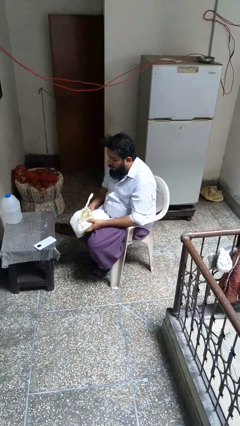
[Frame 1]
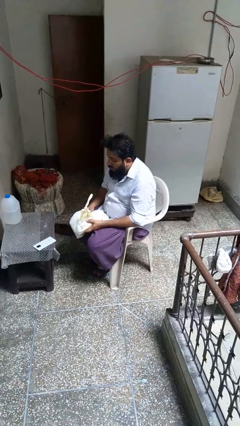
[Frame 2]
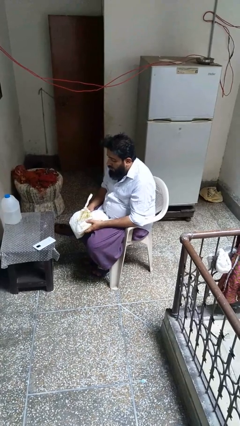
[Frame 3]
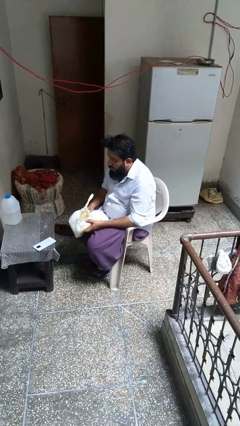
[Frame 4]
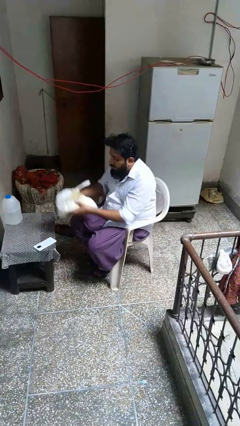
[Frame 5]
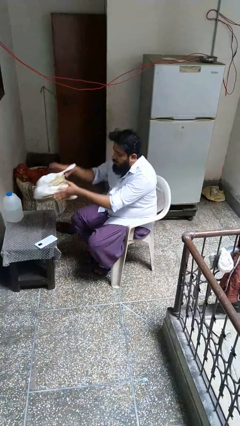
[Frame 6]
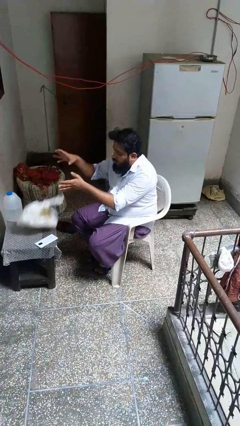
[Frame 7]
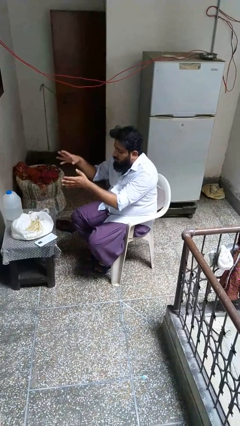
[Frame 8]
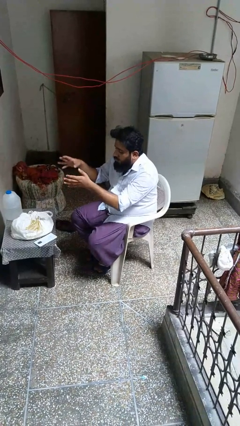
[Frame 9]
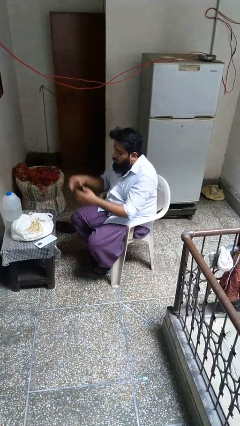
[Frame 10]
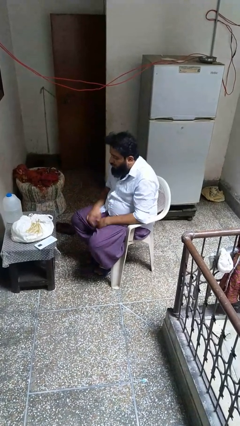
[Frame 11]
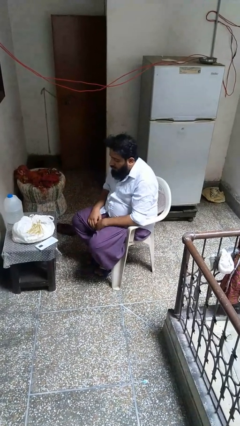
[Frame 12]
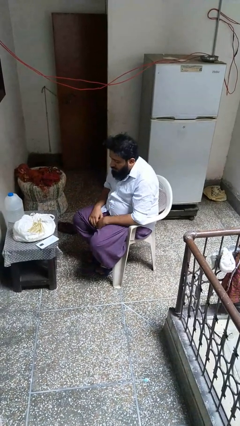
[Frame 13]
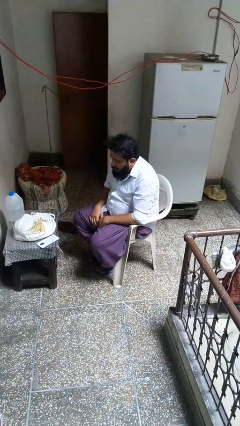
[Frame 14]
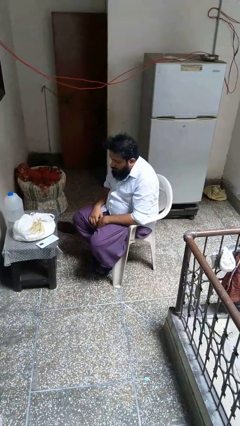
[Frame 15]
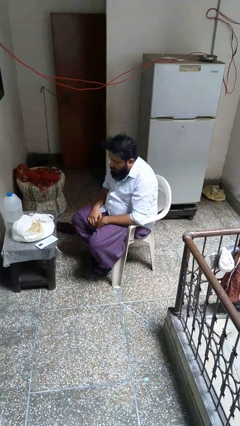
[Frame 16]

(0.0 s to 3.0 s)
person throws object on table

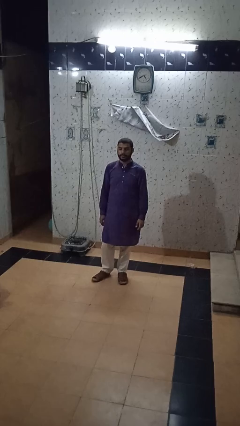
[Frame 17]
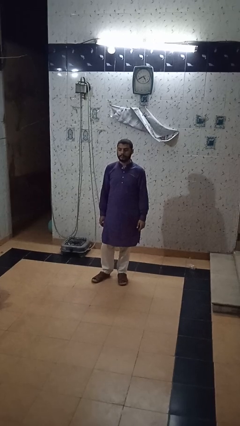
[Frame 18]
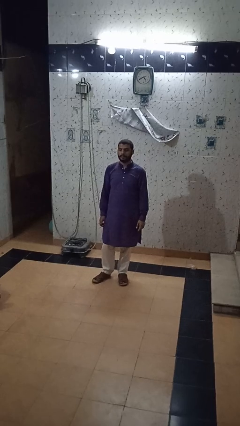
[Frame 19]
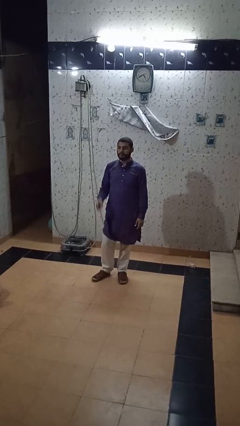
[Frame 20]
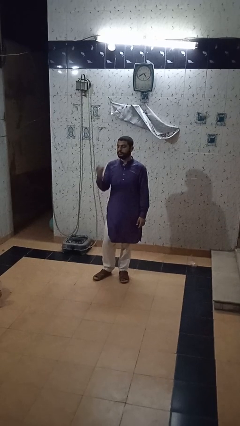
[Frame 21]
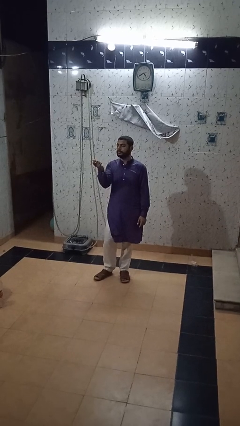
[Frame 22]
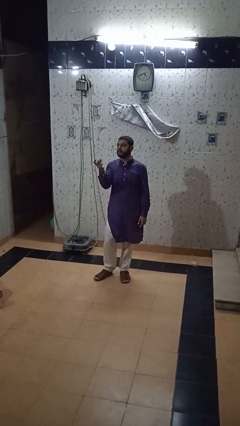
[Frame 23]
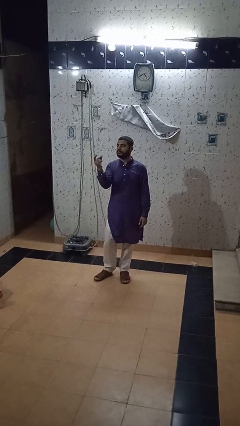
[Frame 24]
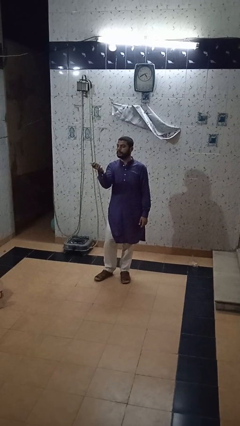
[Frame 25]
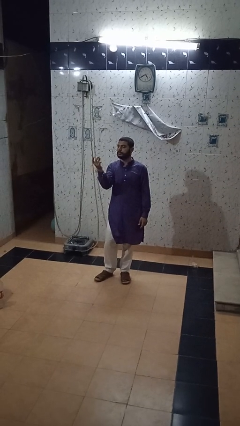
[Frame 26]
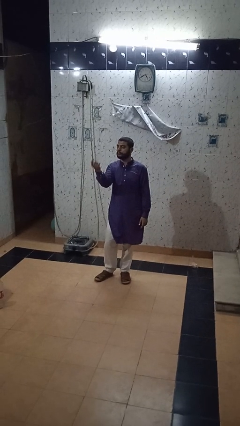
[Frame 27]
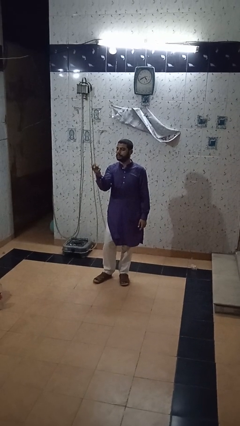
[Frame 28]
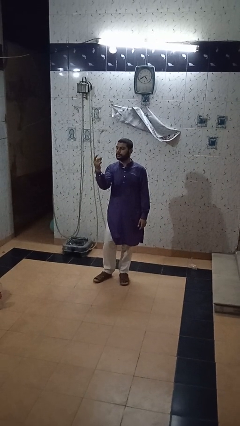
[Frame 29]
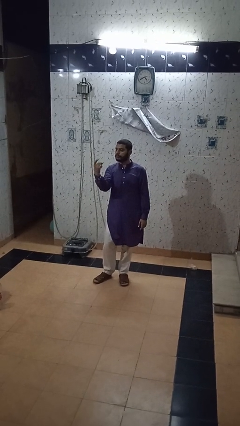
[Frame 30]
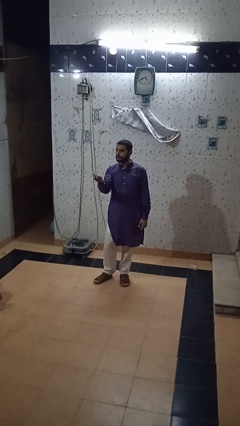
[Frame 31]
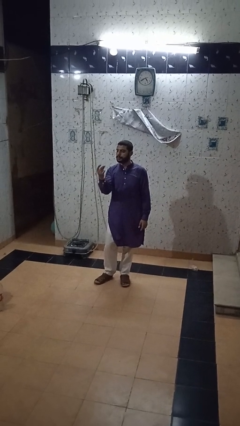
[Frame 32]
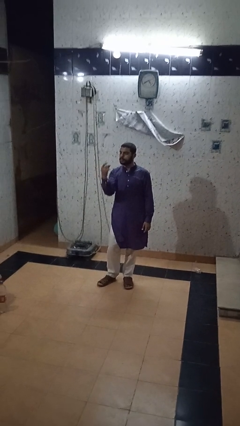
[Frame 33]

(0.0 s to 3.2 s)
person snaps fingers

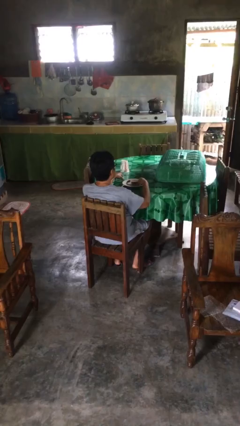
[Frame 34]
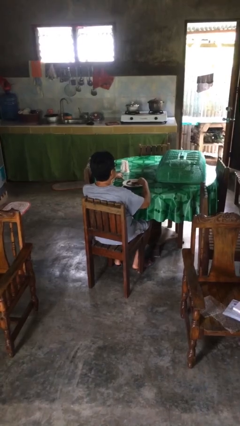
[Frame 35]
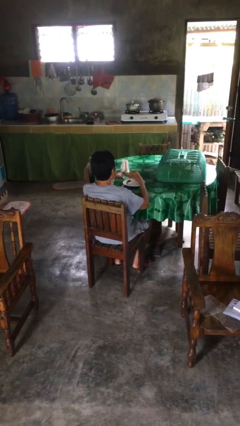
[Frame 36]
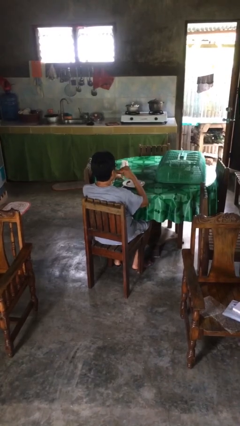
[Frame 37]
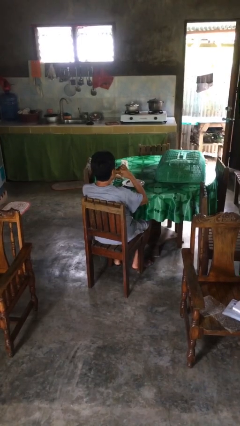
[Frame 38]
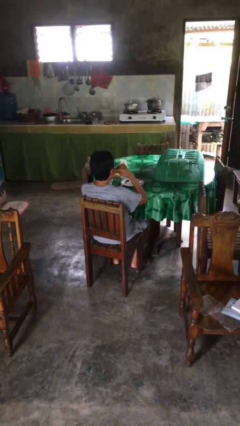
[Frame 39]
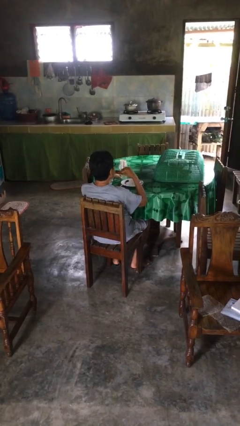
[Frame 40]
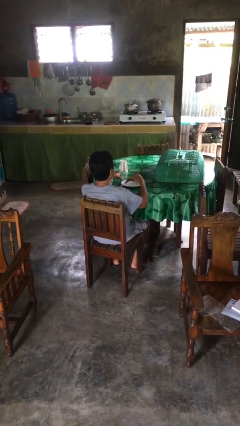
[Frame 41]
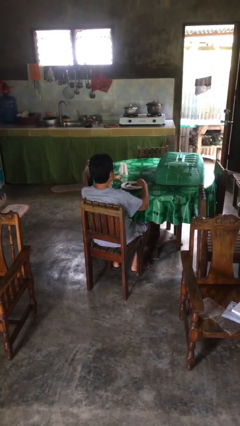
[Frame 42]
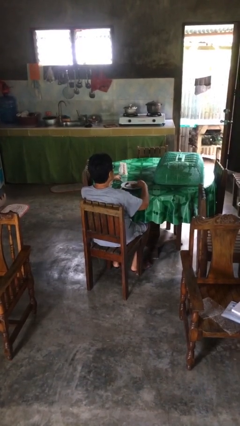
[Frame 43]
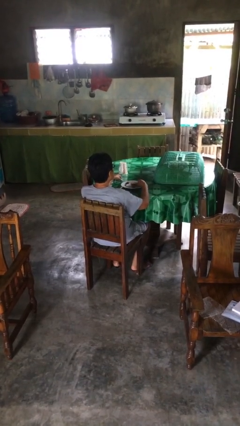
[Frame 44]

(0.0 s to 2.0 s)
person eats with hands

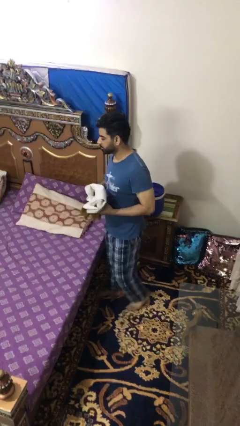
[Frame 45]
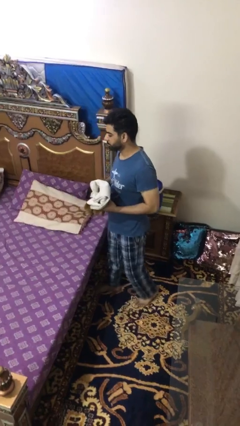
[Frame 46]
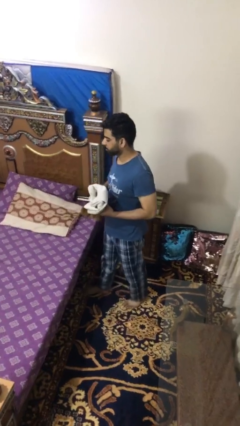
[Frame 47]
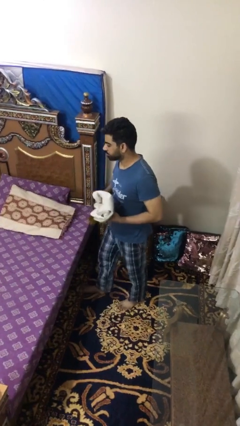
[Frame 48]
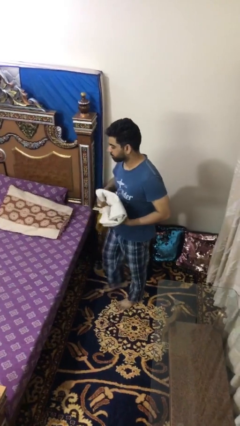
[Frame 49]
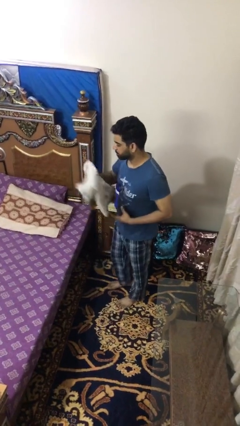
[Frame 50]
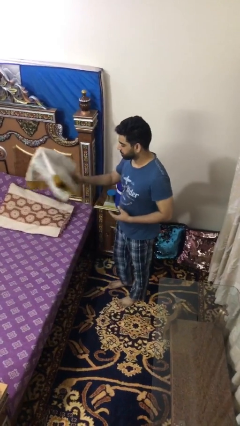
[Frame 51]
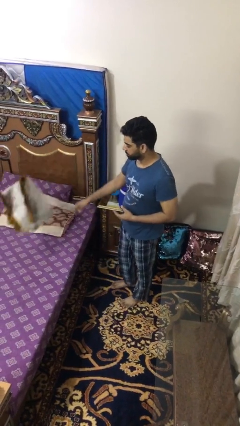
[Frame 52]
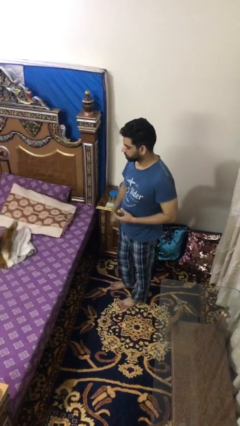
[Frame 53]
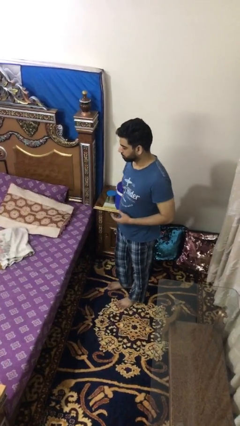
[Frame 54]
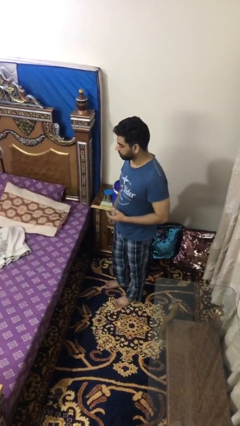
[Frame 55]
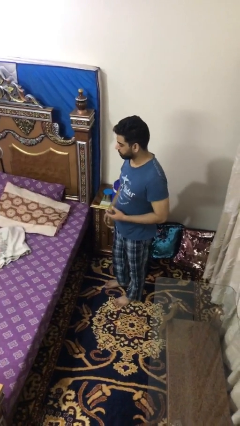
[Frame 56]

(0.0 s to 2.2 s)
person throws object on bed

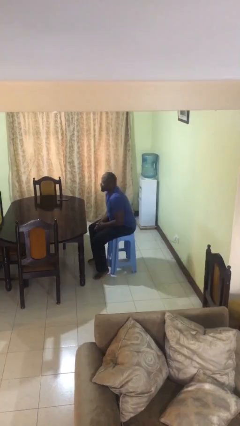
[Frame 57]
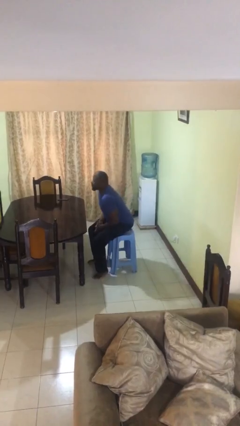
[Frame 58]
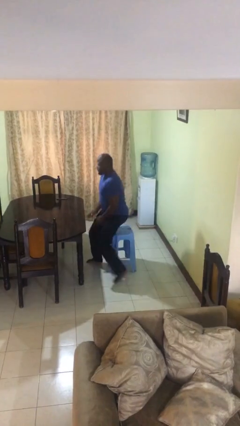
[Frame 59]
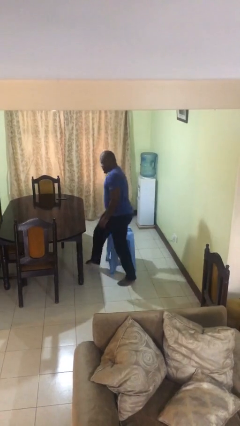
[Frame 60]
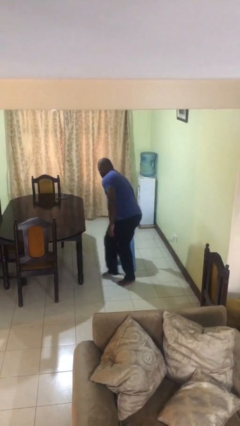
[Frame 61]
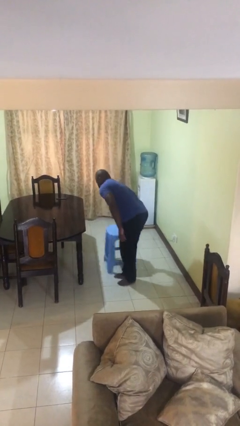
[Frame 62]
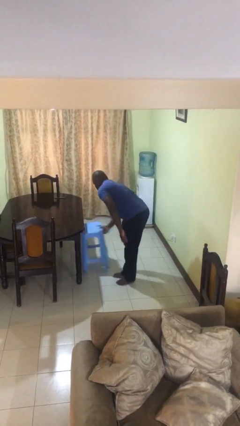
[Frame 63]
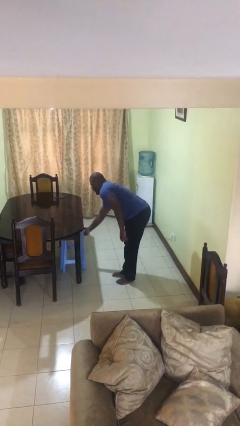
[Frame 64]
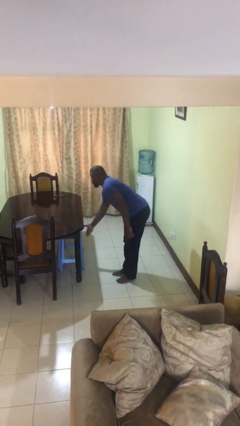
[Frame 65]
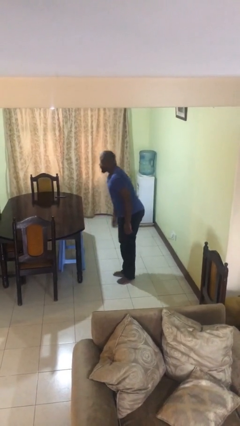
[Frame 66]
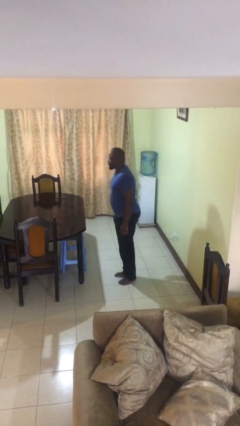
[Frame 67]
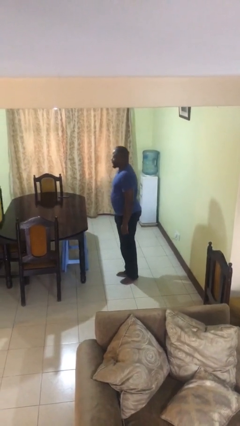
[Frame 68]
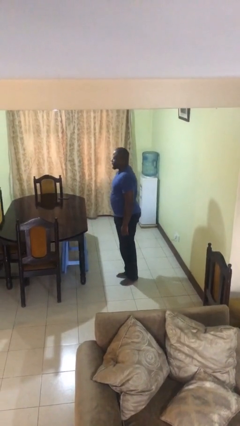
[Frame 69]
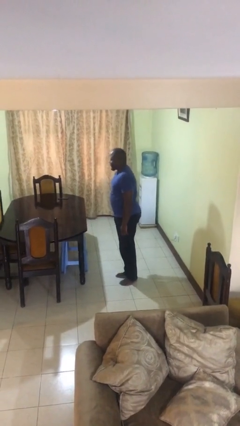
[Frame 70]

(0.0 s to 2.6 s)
person stands up

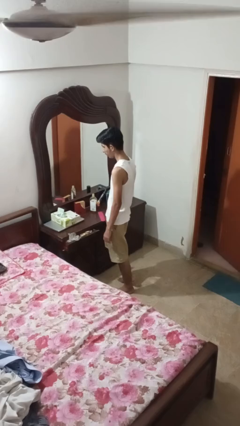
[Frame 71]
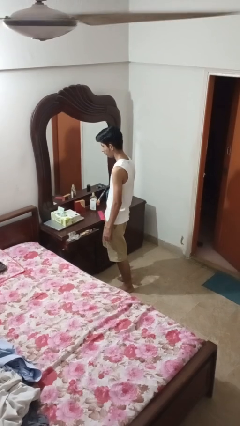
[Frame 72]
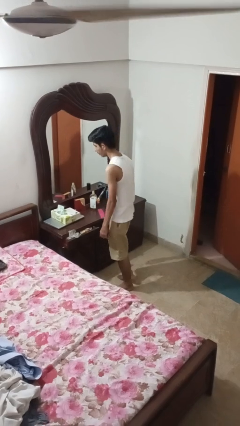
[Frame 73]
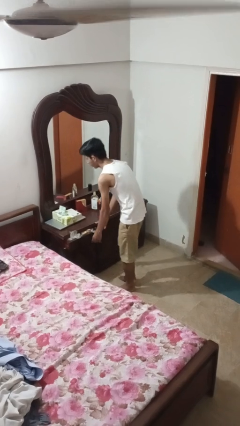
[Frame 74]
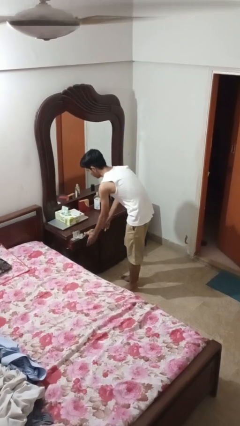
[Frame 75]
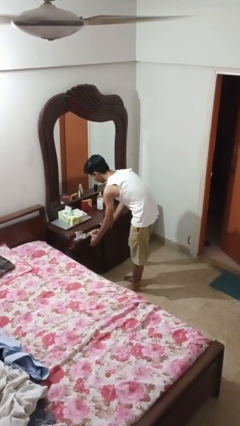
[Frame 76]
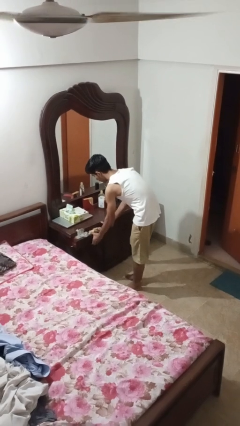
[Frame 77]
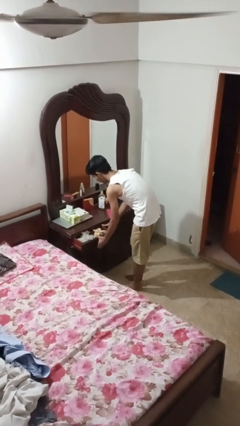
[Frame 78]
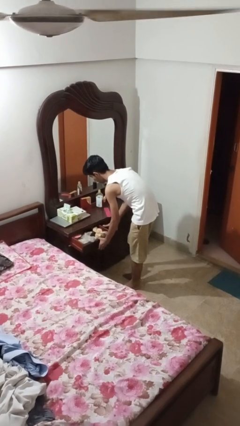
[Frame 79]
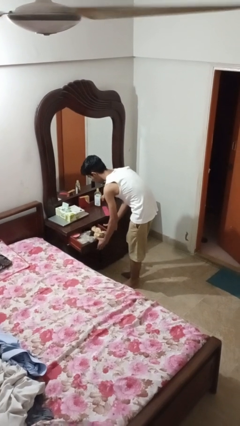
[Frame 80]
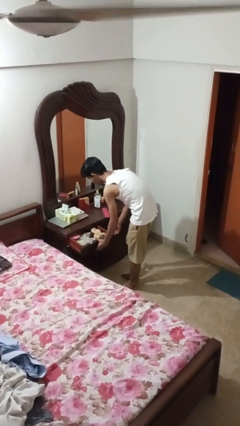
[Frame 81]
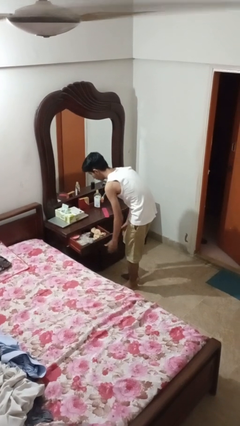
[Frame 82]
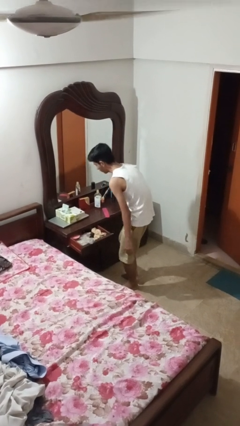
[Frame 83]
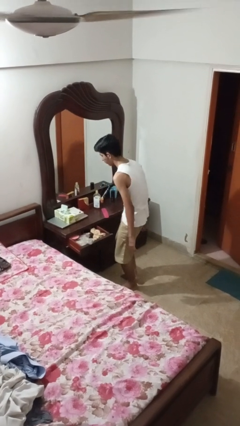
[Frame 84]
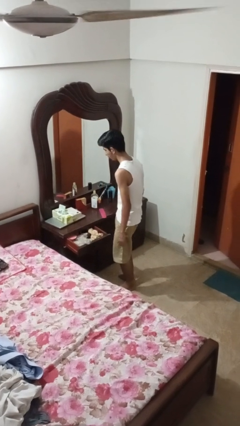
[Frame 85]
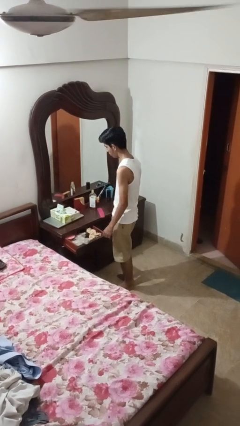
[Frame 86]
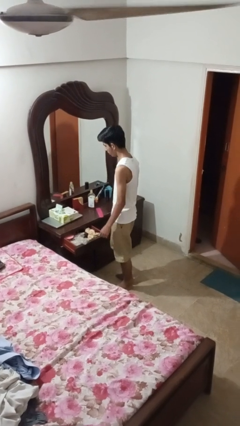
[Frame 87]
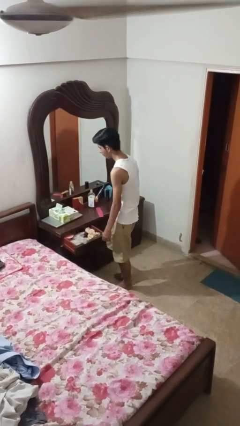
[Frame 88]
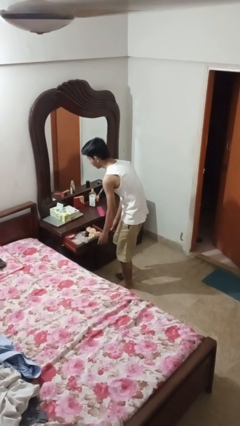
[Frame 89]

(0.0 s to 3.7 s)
person opens dresser drawer

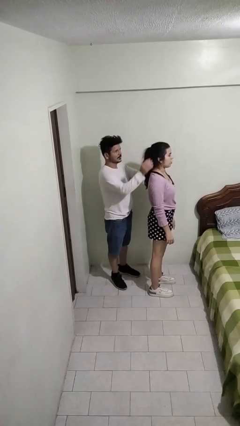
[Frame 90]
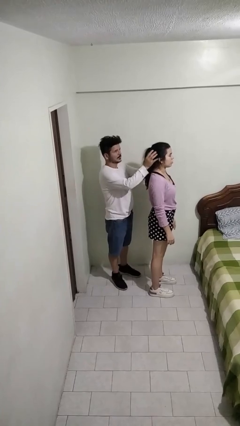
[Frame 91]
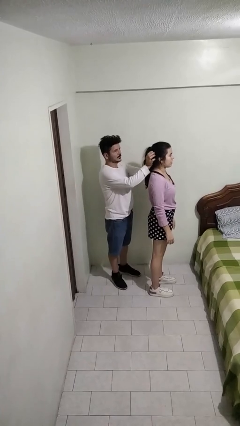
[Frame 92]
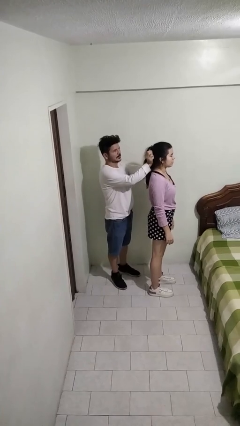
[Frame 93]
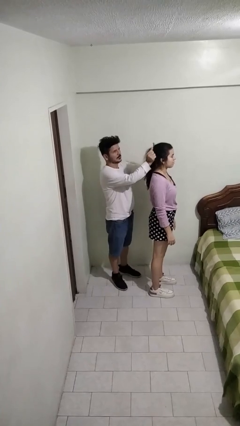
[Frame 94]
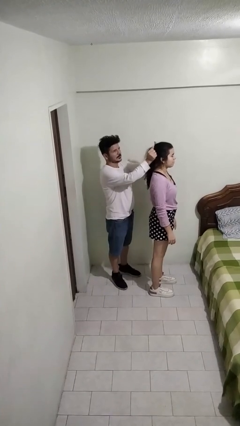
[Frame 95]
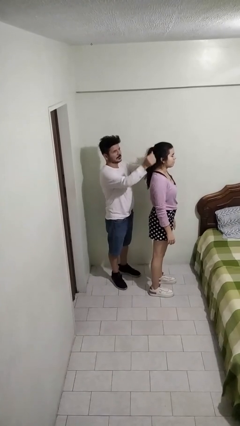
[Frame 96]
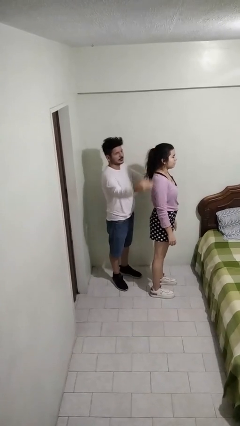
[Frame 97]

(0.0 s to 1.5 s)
person grabs person by hair
